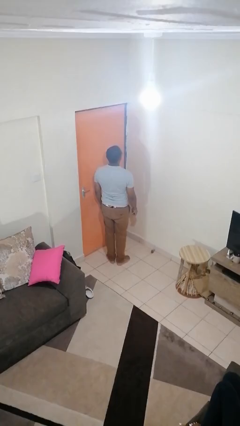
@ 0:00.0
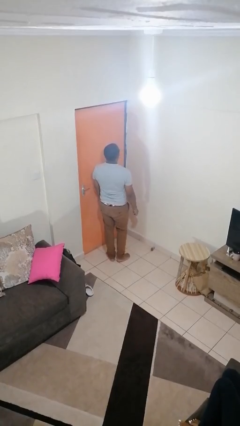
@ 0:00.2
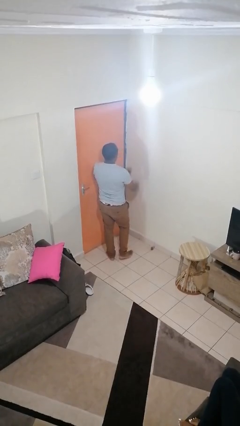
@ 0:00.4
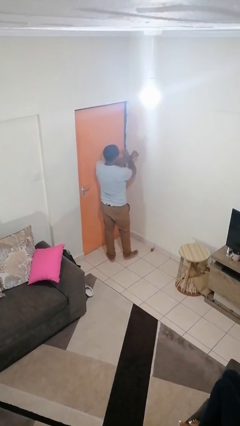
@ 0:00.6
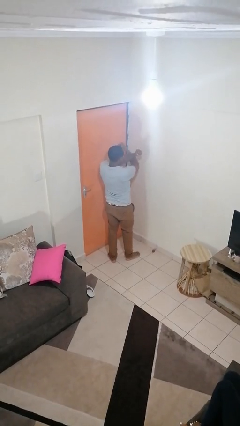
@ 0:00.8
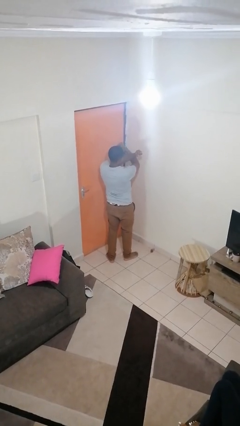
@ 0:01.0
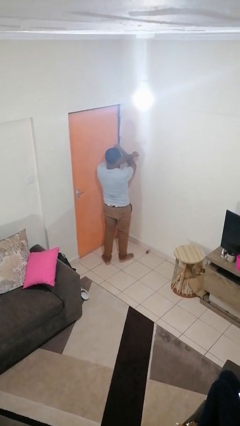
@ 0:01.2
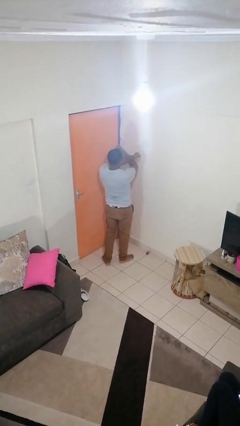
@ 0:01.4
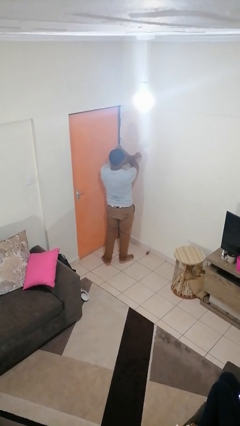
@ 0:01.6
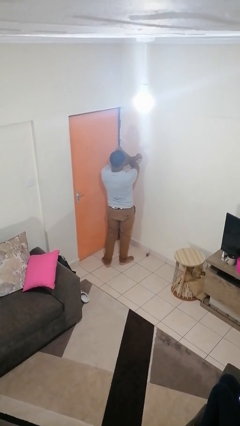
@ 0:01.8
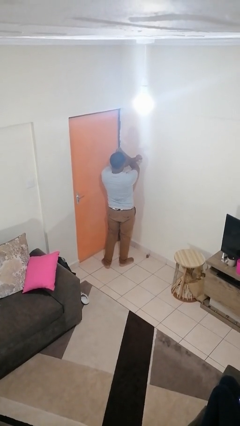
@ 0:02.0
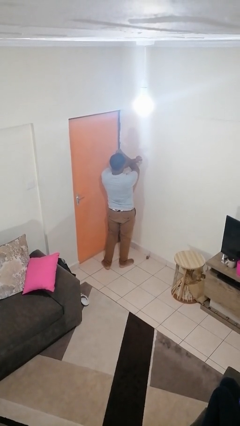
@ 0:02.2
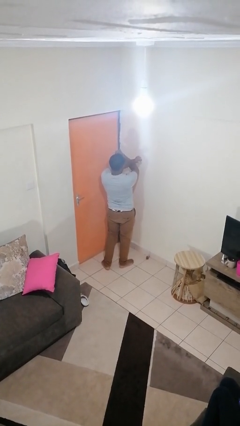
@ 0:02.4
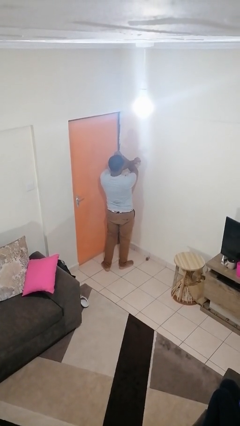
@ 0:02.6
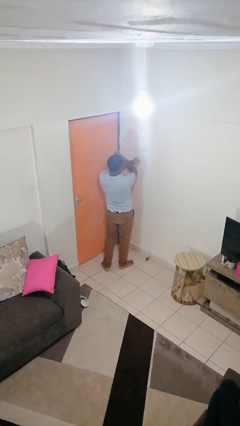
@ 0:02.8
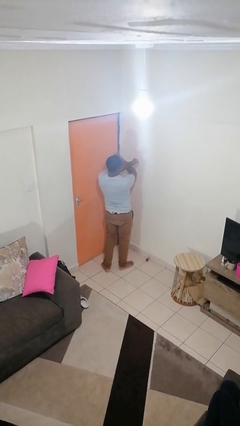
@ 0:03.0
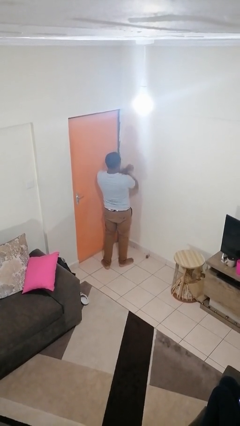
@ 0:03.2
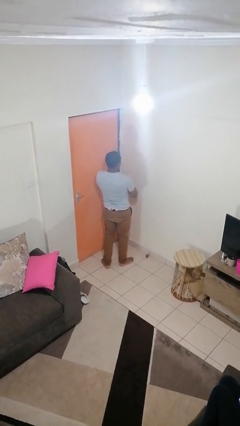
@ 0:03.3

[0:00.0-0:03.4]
person gestures arms x

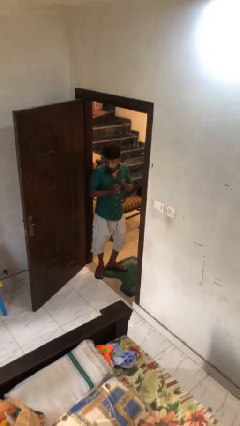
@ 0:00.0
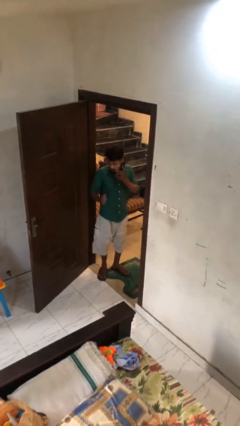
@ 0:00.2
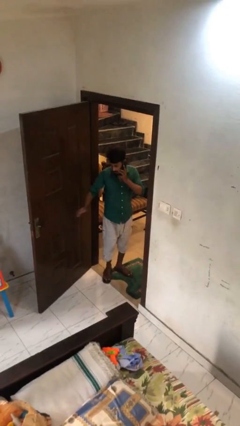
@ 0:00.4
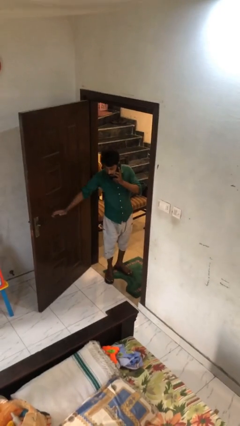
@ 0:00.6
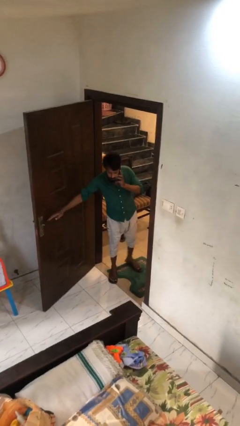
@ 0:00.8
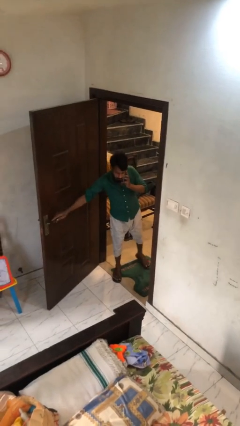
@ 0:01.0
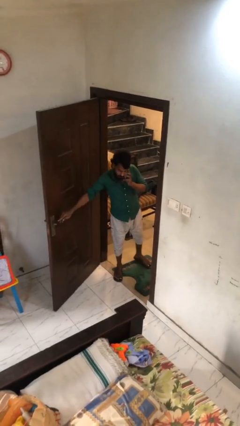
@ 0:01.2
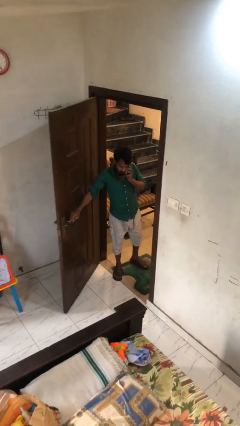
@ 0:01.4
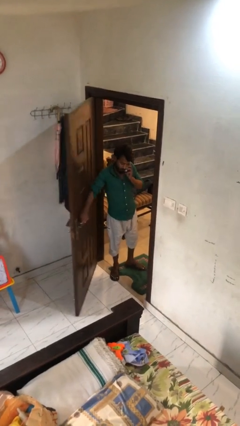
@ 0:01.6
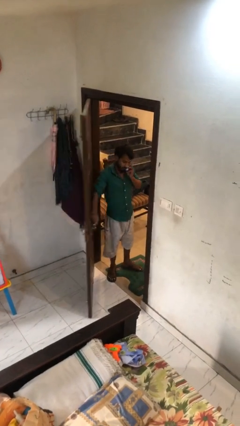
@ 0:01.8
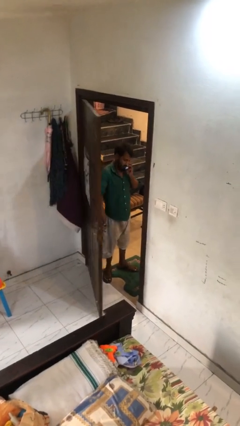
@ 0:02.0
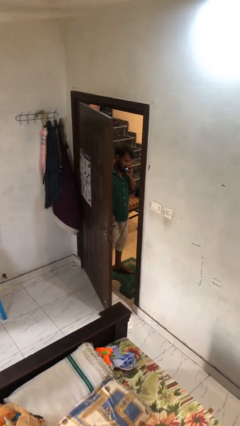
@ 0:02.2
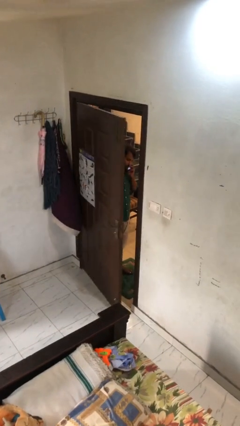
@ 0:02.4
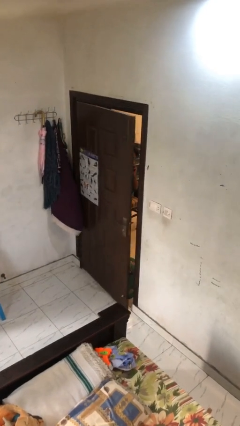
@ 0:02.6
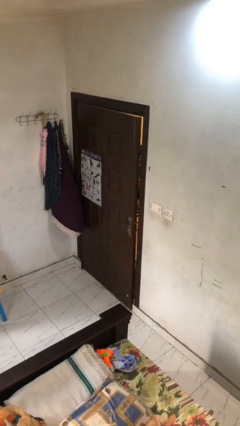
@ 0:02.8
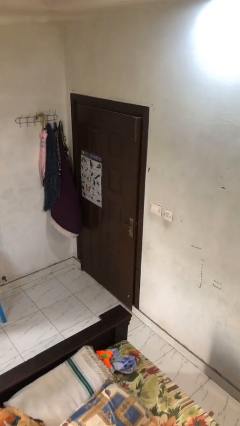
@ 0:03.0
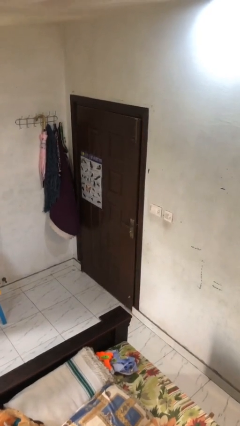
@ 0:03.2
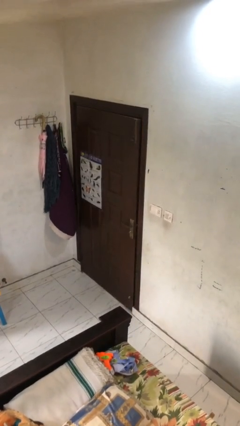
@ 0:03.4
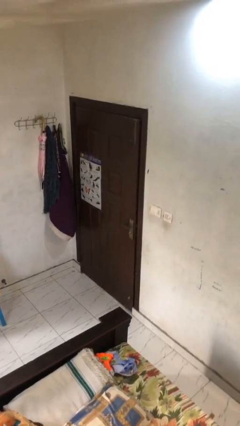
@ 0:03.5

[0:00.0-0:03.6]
person closes facility door

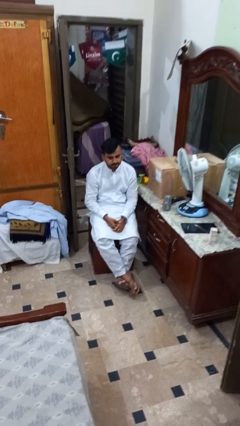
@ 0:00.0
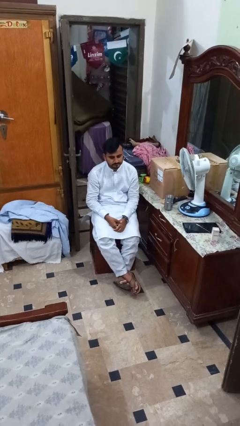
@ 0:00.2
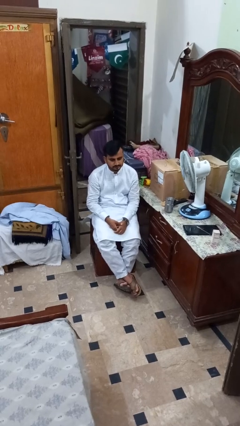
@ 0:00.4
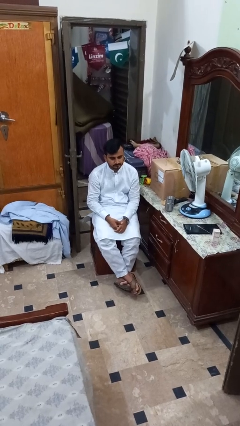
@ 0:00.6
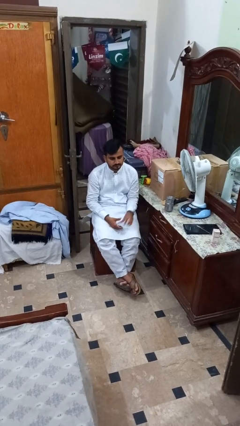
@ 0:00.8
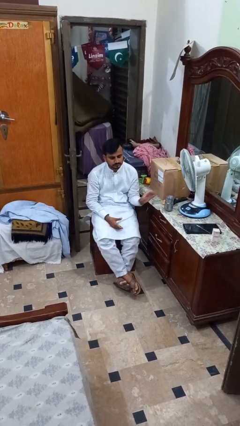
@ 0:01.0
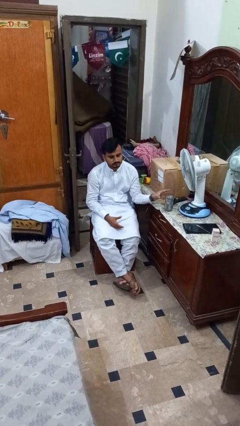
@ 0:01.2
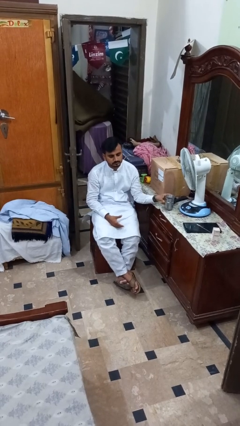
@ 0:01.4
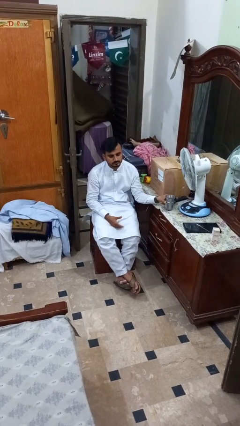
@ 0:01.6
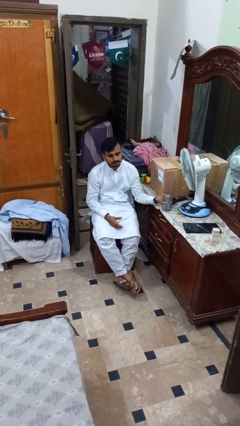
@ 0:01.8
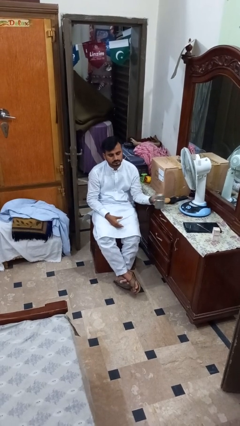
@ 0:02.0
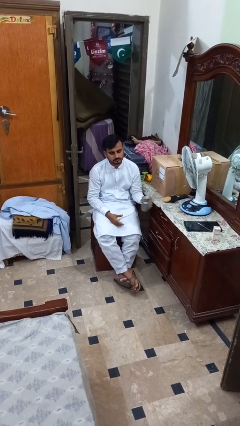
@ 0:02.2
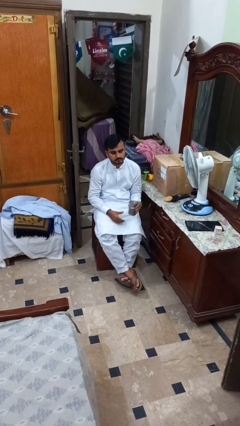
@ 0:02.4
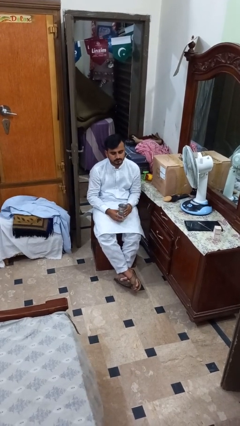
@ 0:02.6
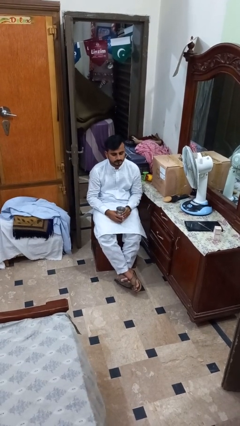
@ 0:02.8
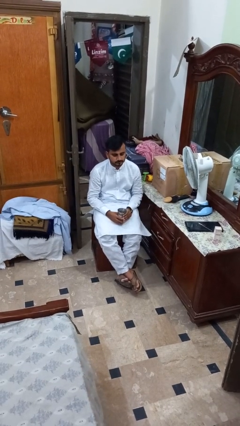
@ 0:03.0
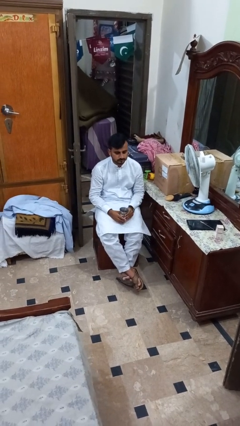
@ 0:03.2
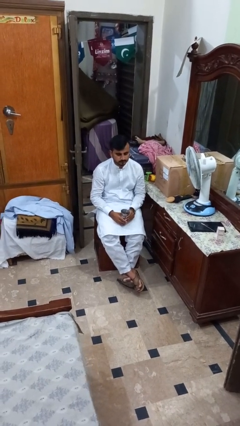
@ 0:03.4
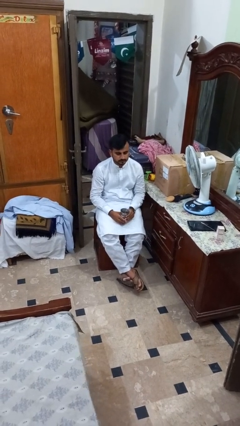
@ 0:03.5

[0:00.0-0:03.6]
person picks up object from table

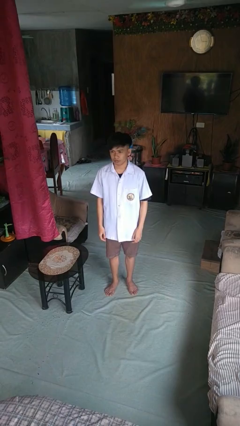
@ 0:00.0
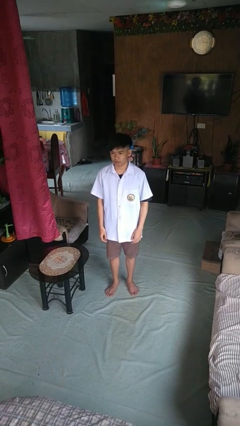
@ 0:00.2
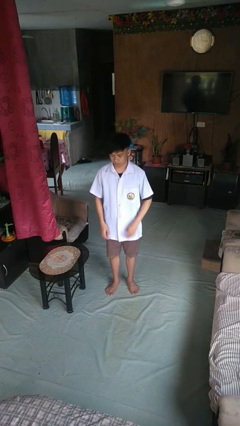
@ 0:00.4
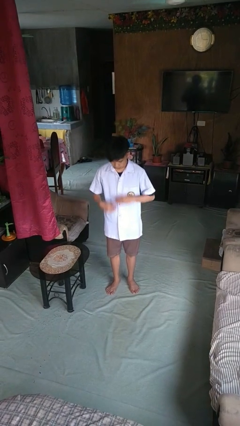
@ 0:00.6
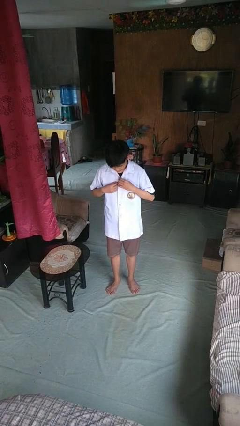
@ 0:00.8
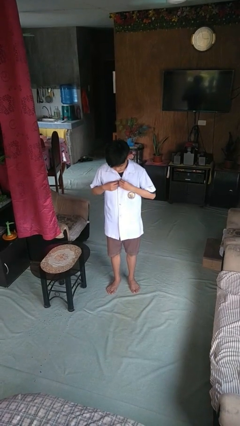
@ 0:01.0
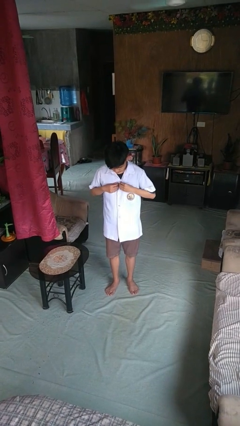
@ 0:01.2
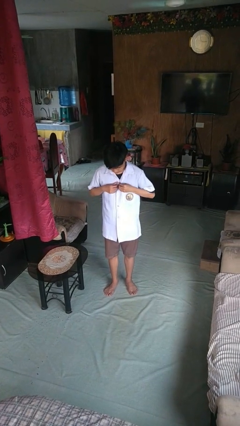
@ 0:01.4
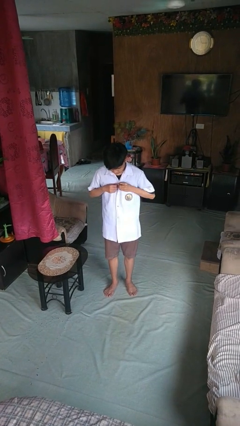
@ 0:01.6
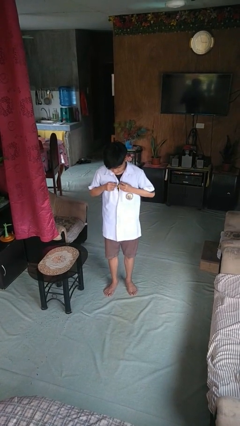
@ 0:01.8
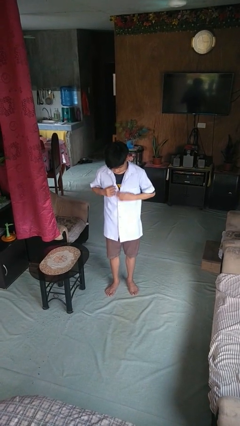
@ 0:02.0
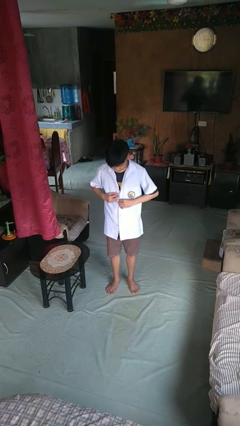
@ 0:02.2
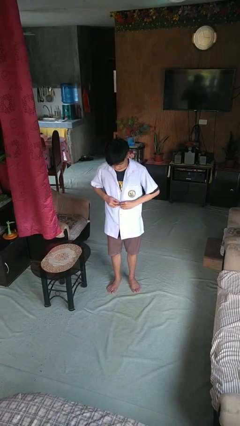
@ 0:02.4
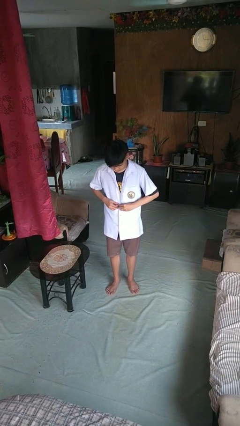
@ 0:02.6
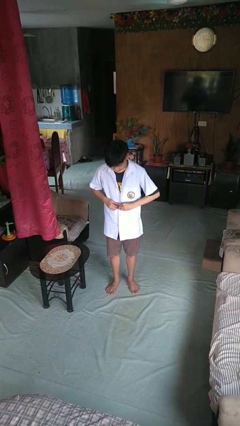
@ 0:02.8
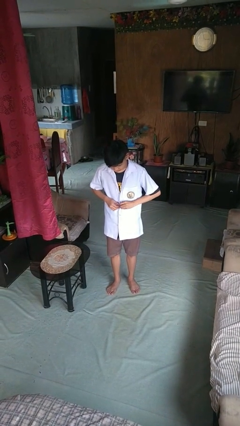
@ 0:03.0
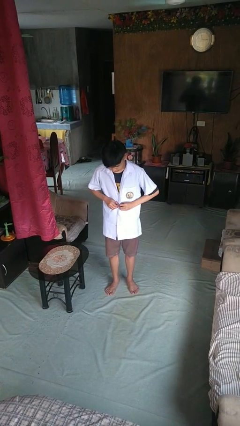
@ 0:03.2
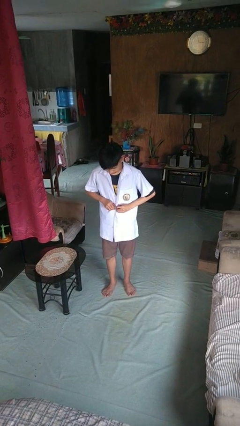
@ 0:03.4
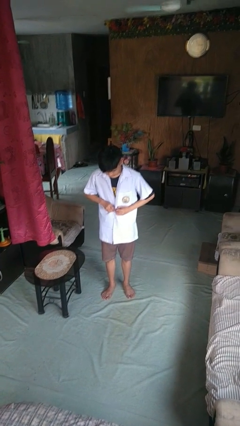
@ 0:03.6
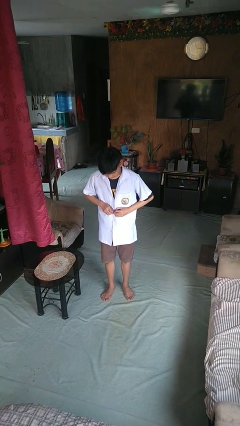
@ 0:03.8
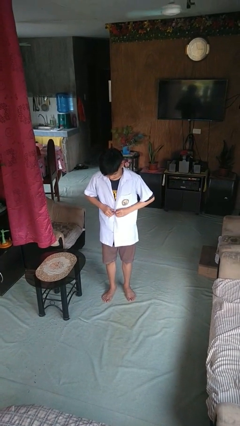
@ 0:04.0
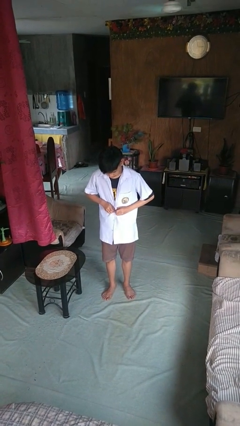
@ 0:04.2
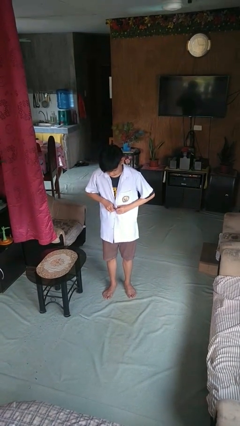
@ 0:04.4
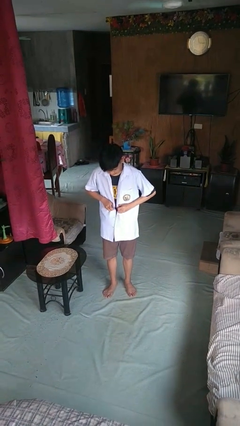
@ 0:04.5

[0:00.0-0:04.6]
person unbuttons shirt

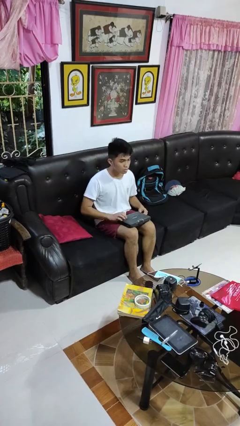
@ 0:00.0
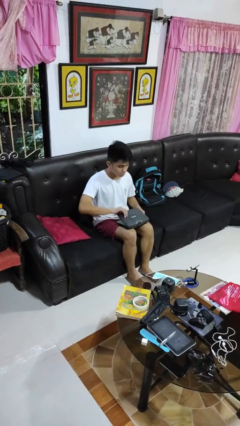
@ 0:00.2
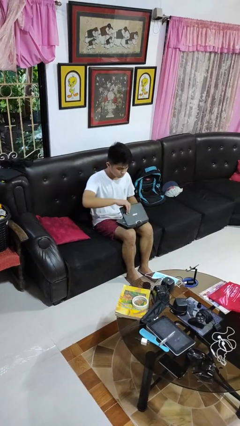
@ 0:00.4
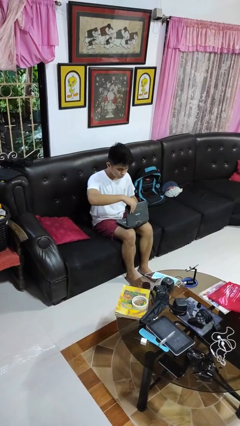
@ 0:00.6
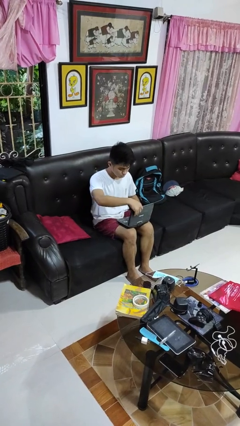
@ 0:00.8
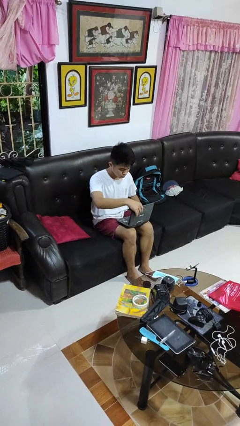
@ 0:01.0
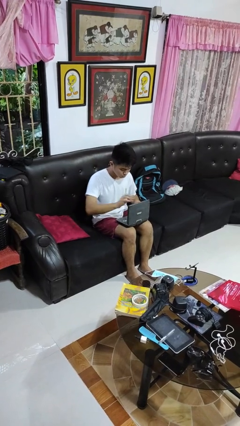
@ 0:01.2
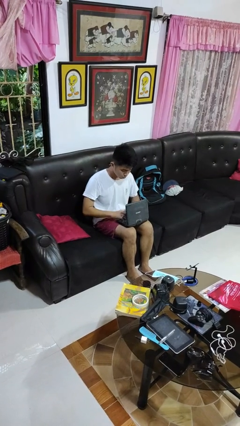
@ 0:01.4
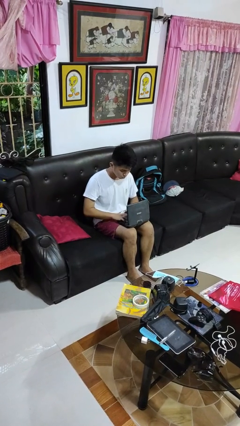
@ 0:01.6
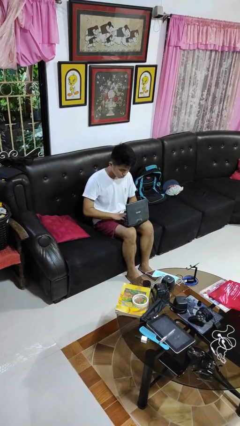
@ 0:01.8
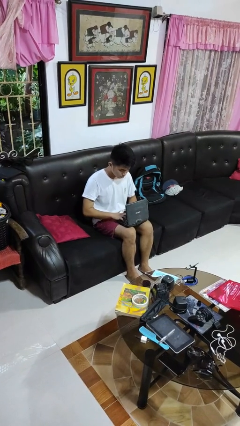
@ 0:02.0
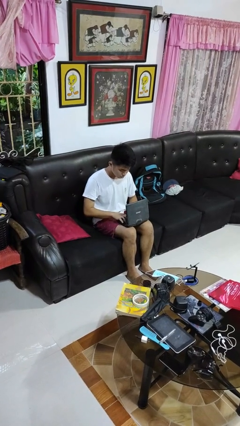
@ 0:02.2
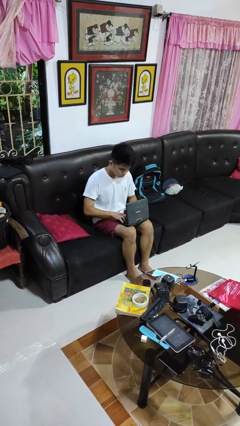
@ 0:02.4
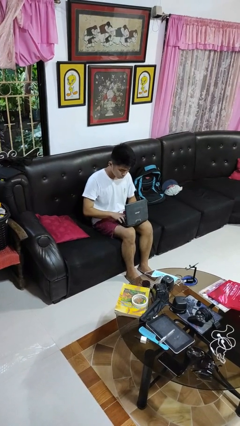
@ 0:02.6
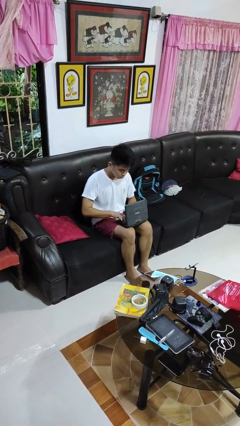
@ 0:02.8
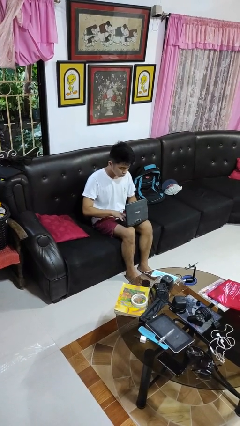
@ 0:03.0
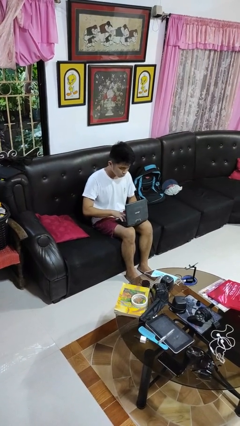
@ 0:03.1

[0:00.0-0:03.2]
person opens laptop
